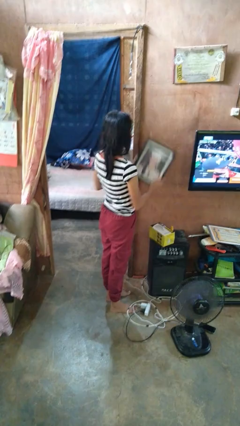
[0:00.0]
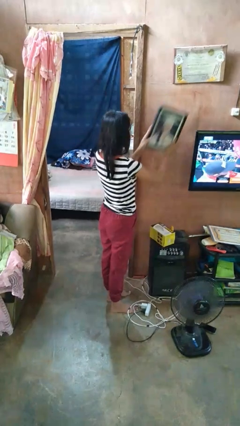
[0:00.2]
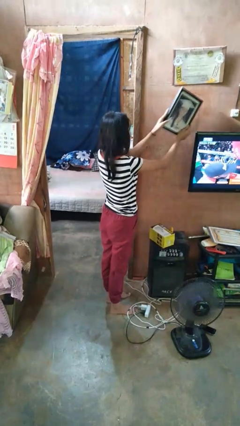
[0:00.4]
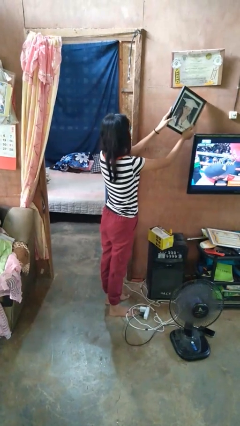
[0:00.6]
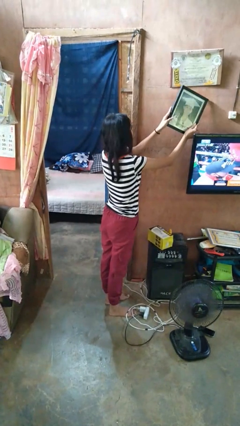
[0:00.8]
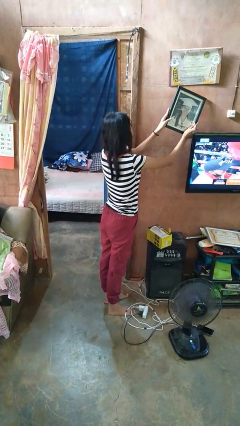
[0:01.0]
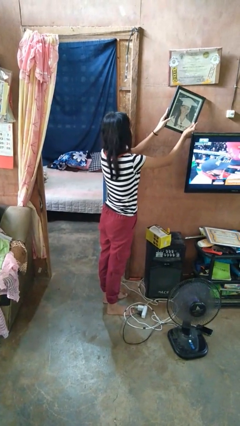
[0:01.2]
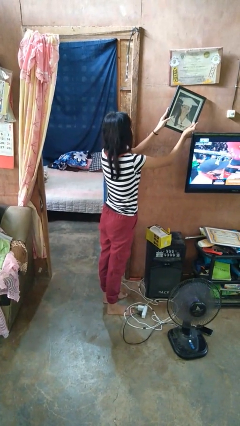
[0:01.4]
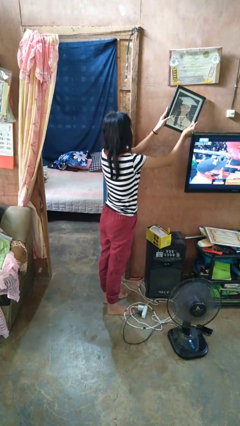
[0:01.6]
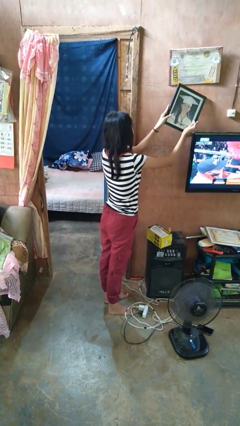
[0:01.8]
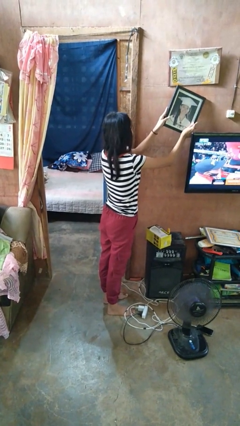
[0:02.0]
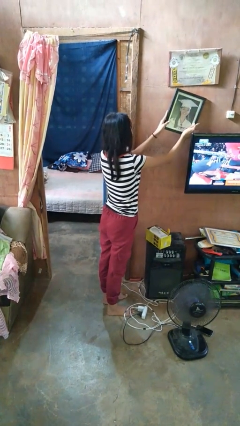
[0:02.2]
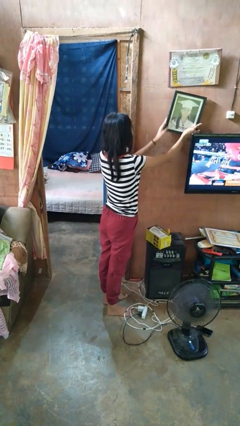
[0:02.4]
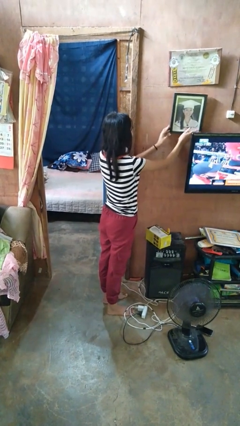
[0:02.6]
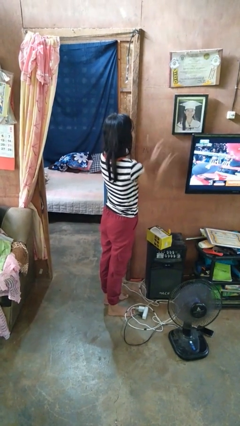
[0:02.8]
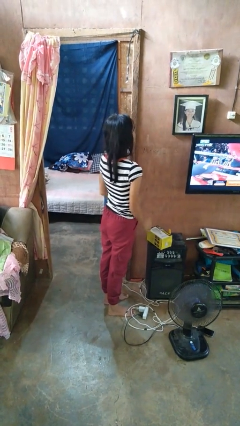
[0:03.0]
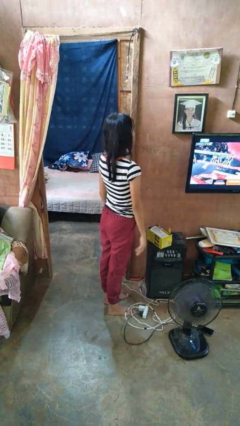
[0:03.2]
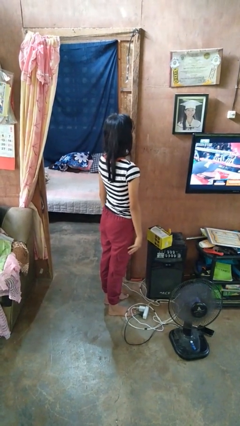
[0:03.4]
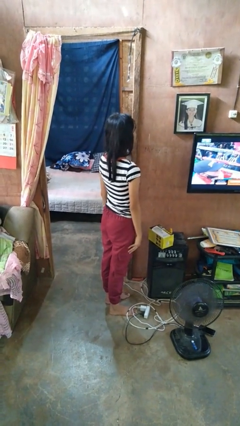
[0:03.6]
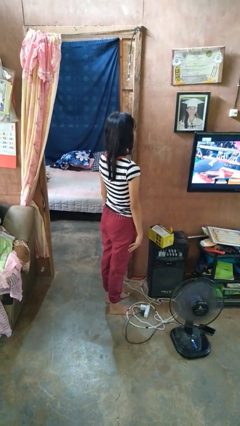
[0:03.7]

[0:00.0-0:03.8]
person puts up picture frame

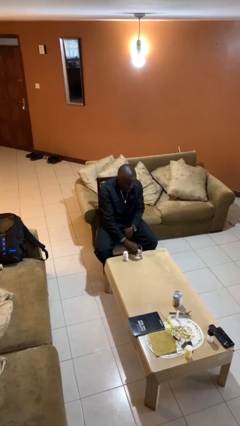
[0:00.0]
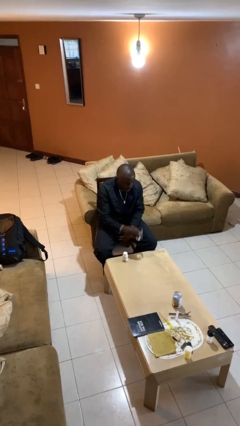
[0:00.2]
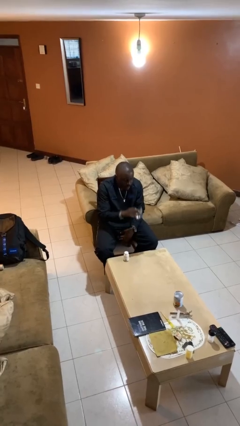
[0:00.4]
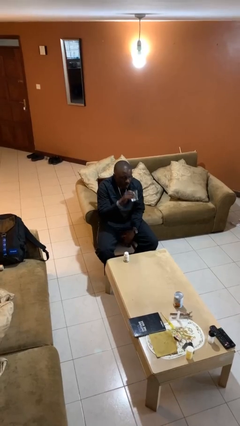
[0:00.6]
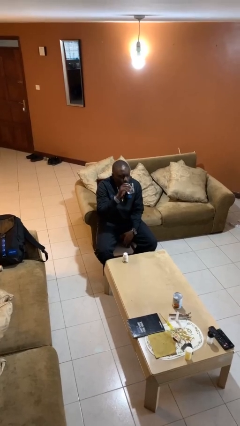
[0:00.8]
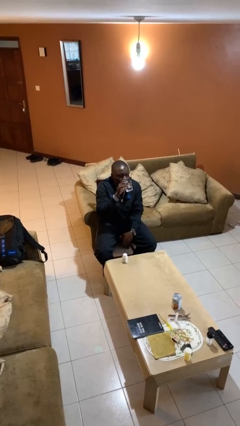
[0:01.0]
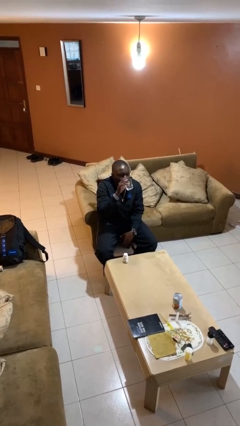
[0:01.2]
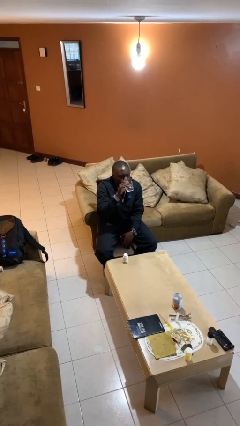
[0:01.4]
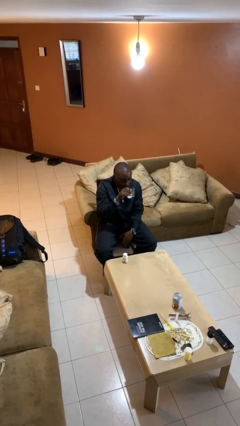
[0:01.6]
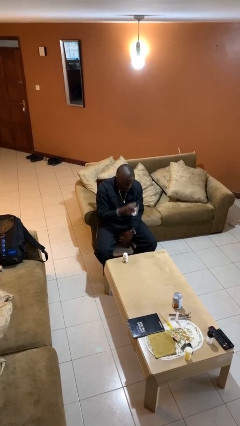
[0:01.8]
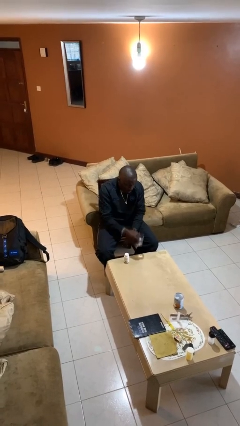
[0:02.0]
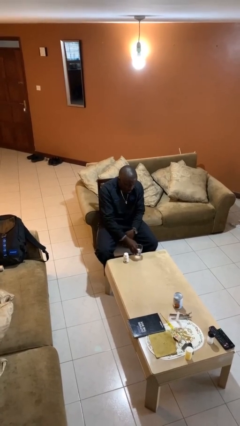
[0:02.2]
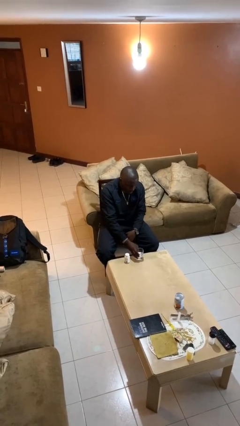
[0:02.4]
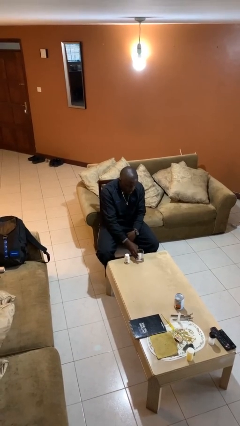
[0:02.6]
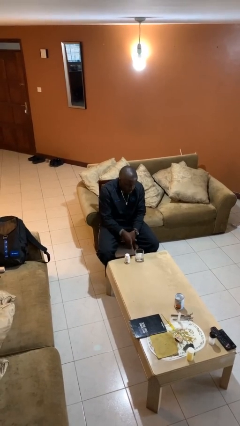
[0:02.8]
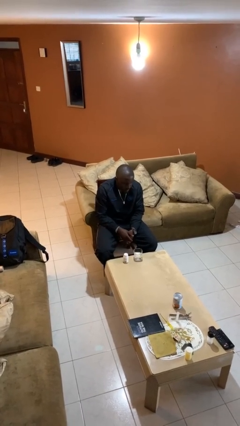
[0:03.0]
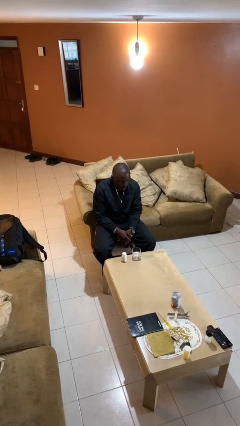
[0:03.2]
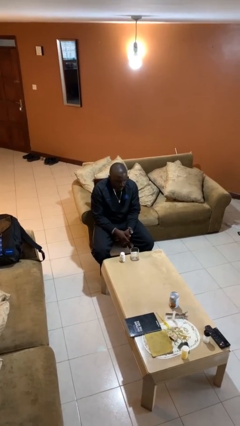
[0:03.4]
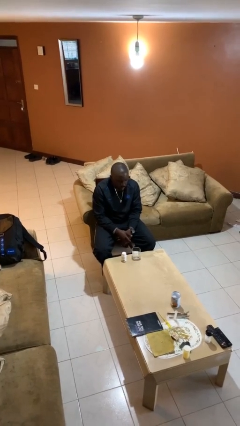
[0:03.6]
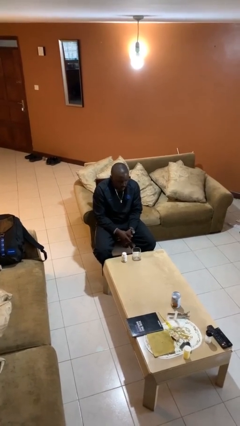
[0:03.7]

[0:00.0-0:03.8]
person drinks from cup

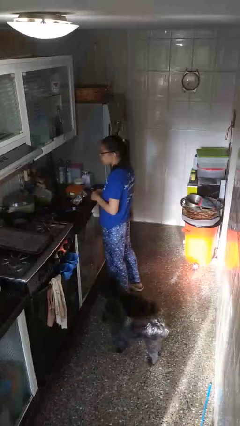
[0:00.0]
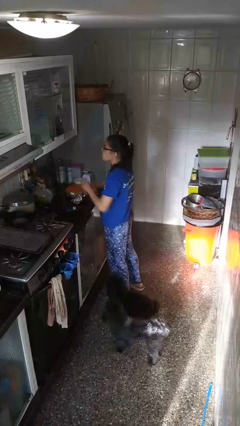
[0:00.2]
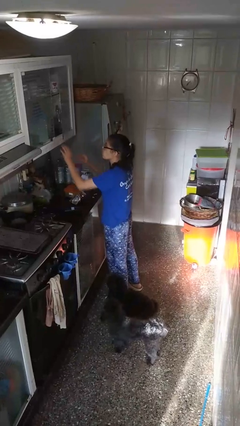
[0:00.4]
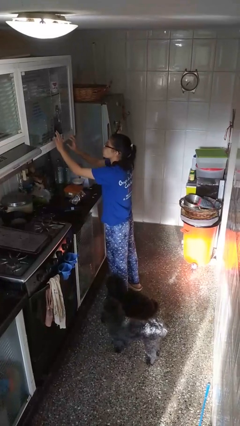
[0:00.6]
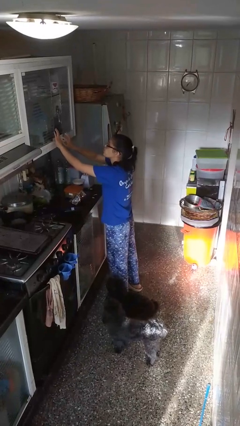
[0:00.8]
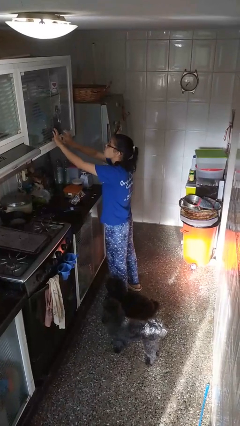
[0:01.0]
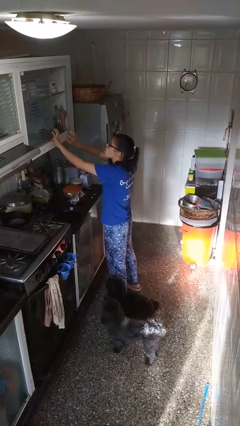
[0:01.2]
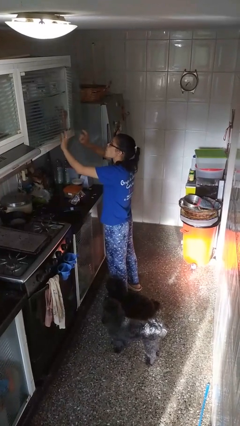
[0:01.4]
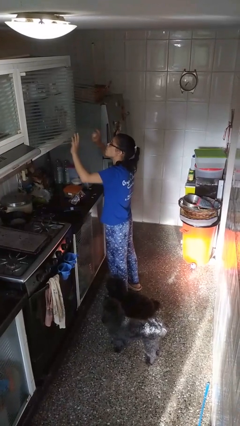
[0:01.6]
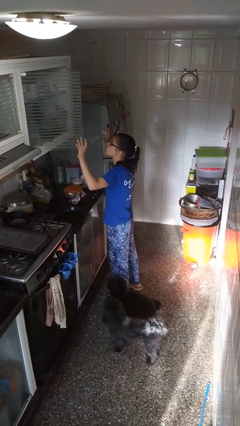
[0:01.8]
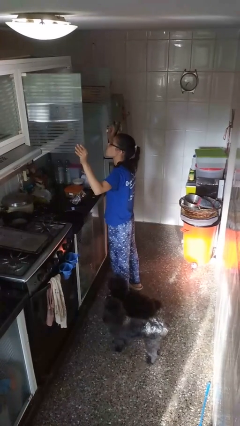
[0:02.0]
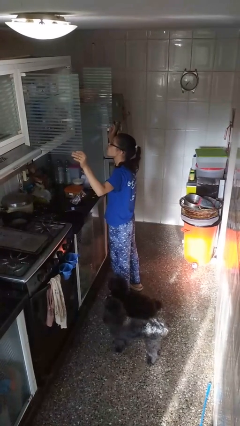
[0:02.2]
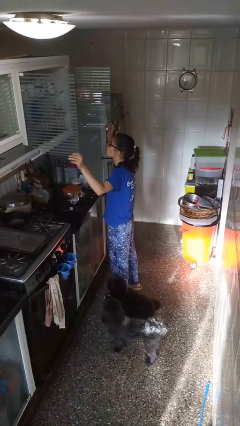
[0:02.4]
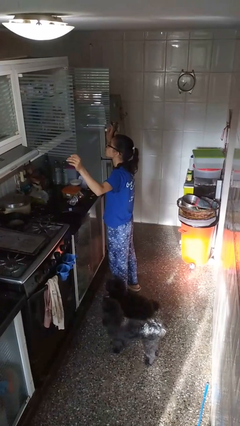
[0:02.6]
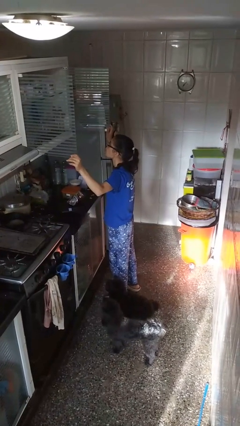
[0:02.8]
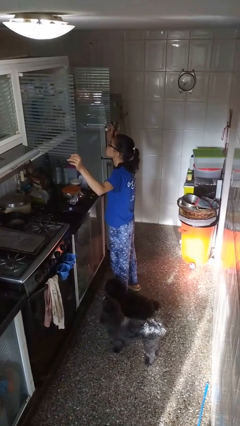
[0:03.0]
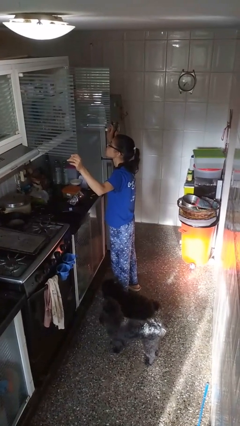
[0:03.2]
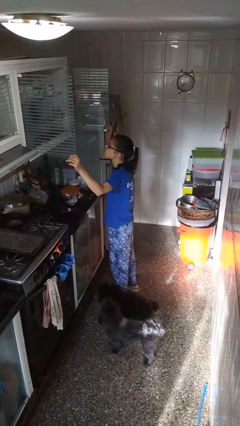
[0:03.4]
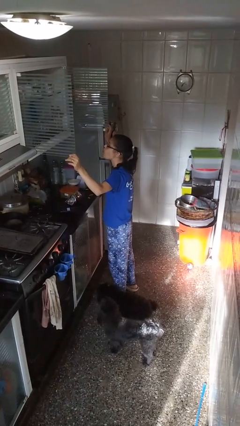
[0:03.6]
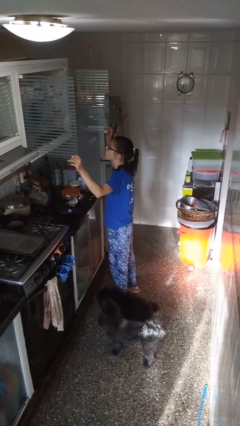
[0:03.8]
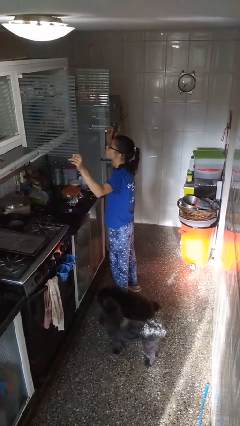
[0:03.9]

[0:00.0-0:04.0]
person closes cabinet

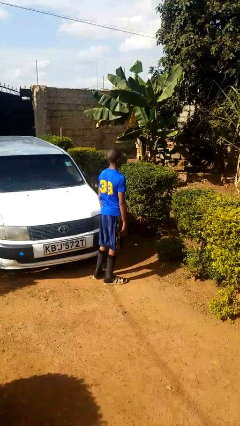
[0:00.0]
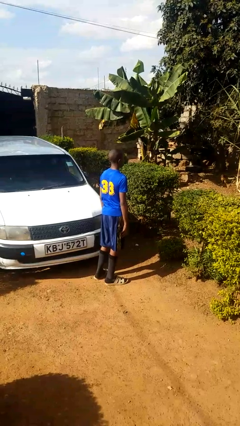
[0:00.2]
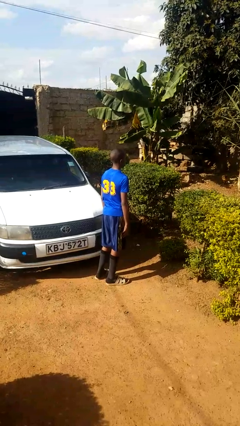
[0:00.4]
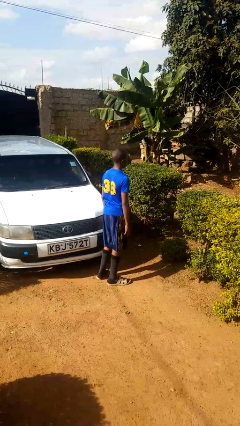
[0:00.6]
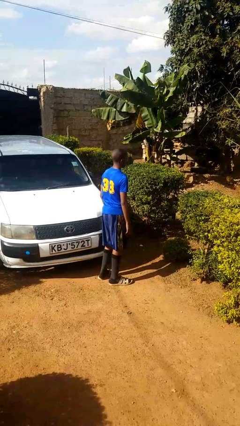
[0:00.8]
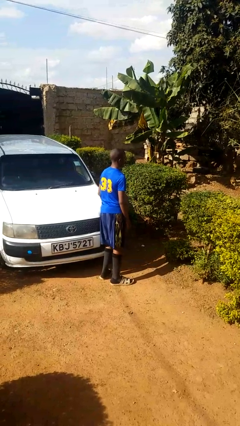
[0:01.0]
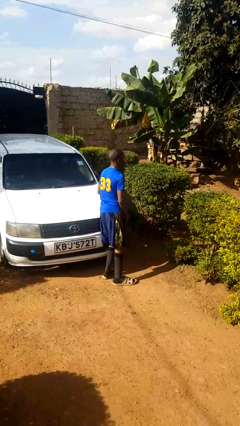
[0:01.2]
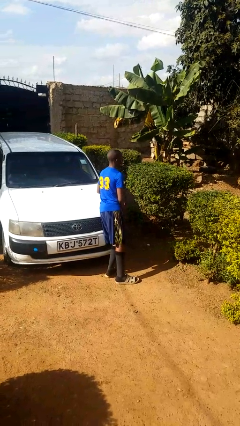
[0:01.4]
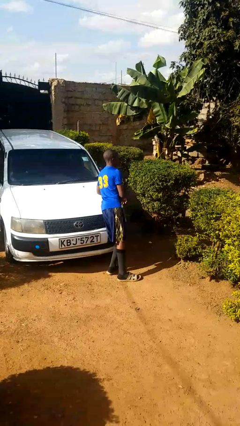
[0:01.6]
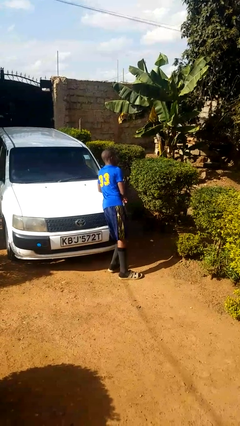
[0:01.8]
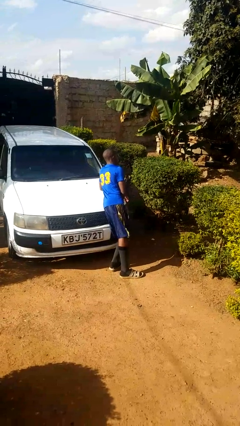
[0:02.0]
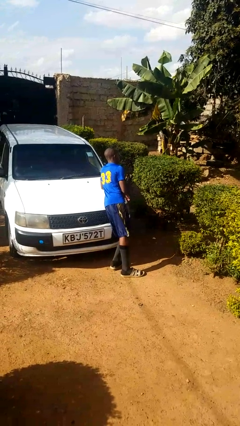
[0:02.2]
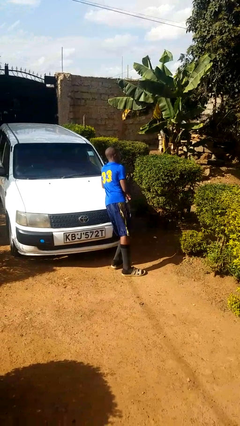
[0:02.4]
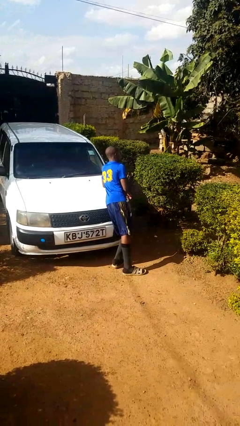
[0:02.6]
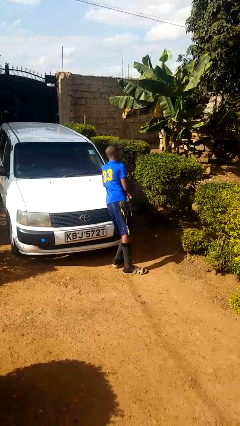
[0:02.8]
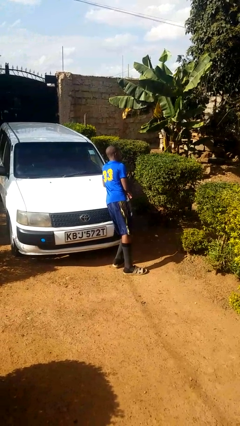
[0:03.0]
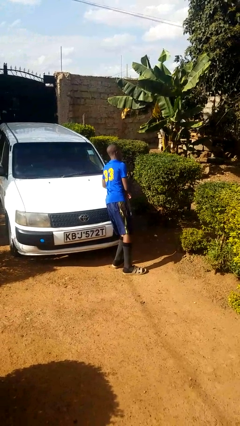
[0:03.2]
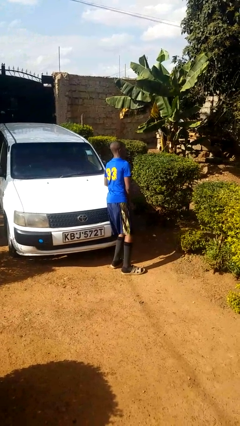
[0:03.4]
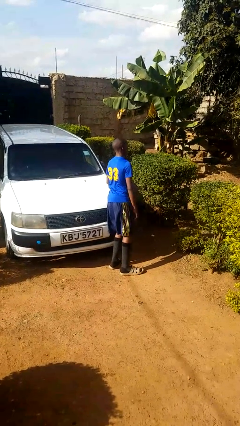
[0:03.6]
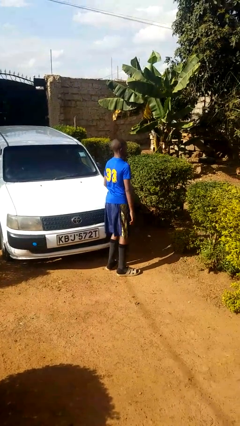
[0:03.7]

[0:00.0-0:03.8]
person leans against car

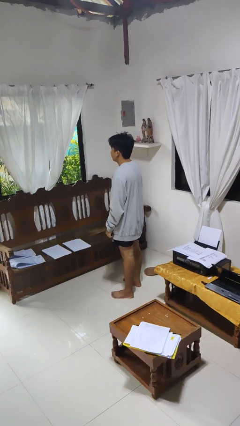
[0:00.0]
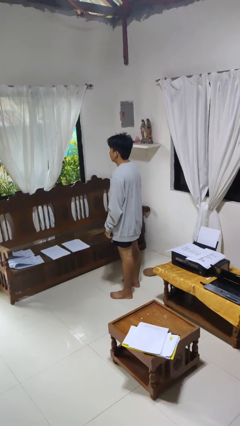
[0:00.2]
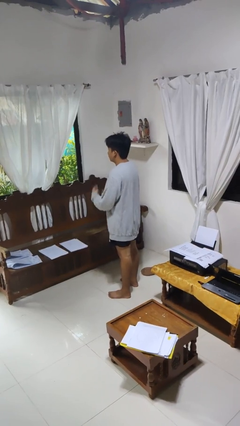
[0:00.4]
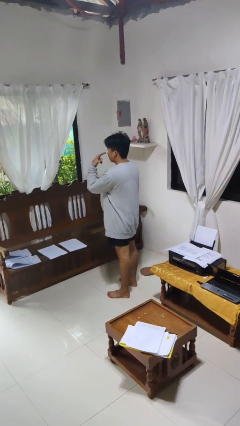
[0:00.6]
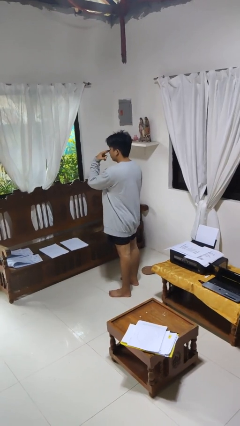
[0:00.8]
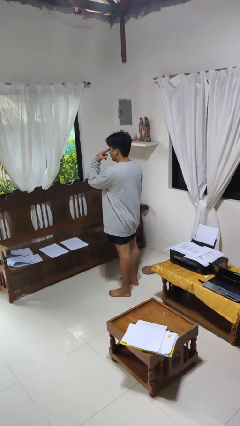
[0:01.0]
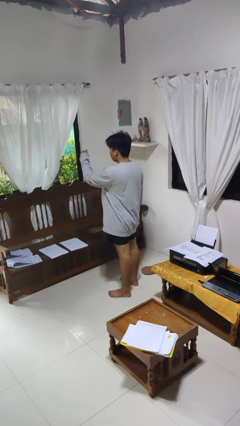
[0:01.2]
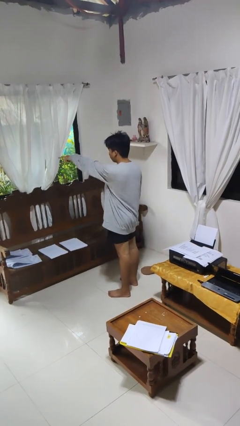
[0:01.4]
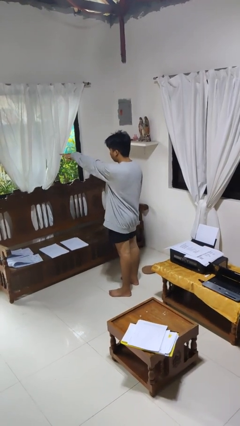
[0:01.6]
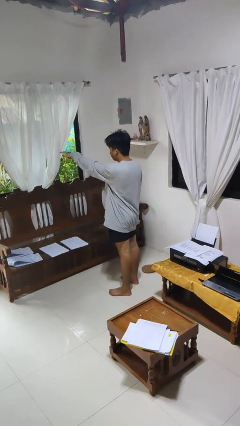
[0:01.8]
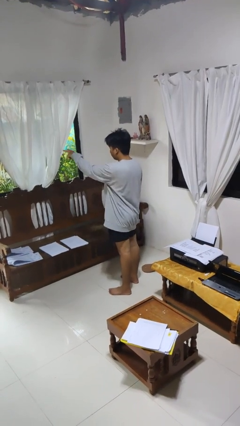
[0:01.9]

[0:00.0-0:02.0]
person gestures watch closely
